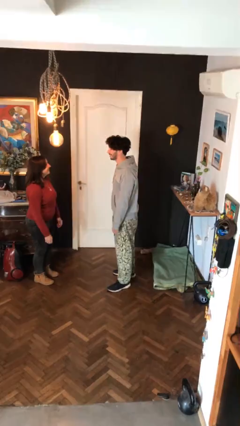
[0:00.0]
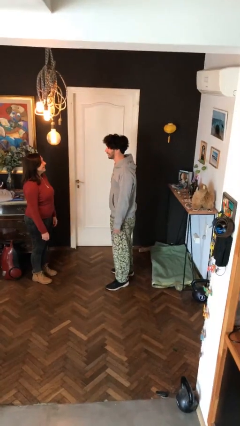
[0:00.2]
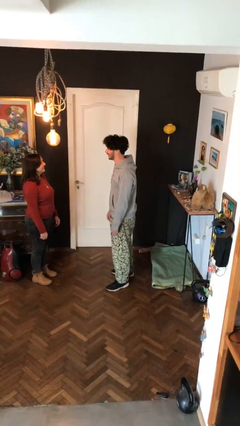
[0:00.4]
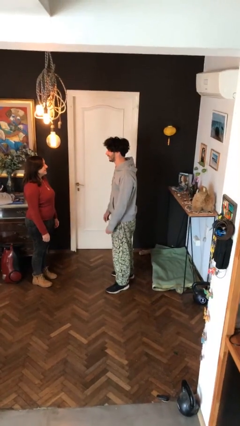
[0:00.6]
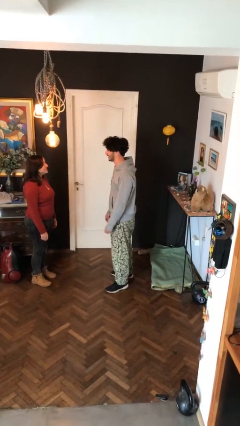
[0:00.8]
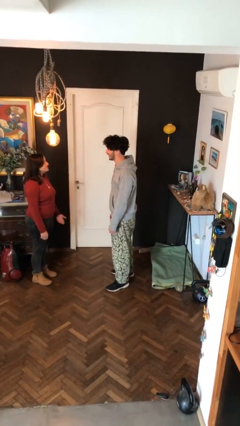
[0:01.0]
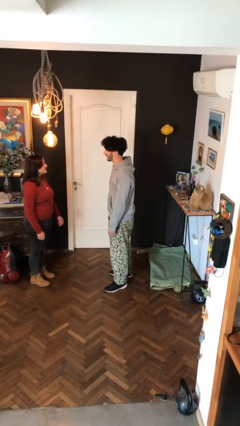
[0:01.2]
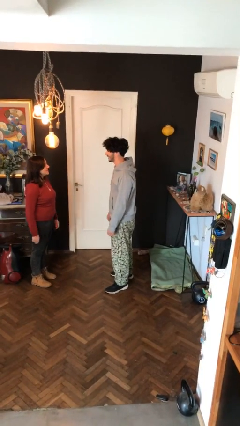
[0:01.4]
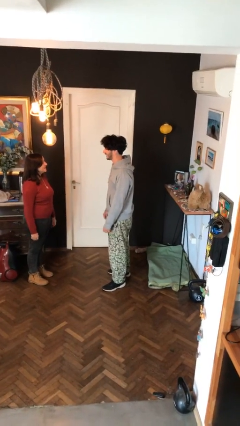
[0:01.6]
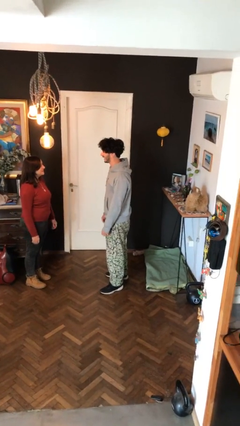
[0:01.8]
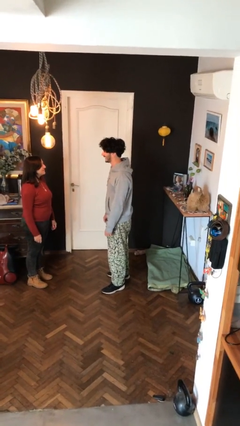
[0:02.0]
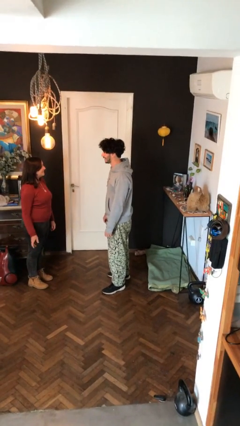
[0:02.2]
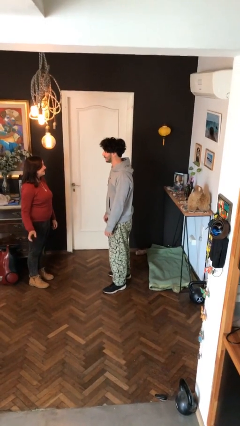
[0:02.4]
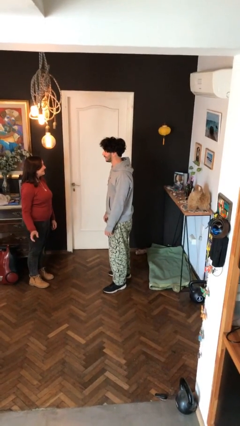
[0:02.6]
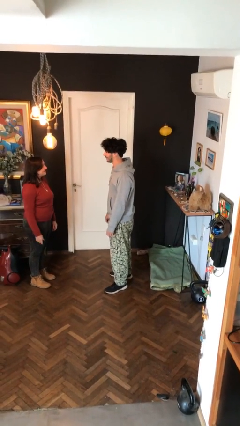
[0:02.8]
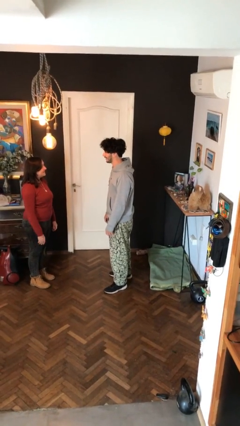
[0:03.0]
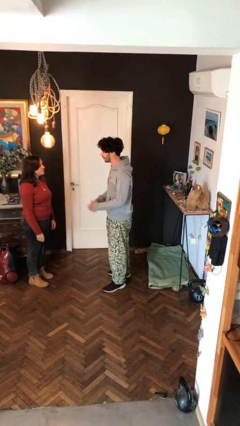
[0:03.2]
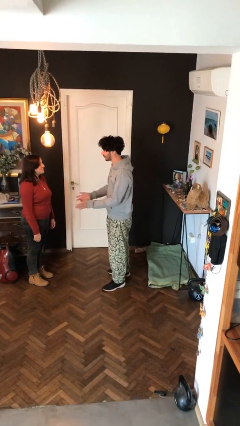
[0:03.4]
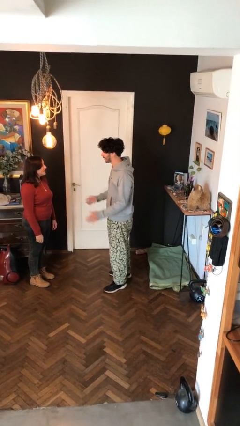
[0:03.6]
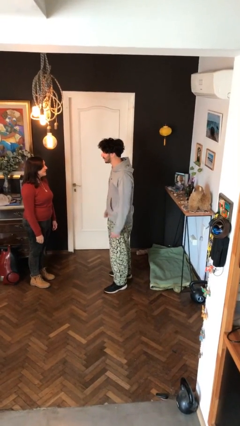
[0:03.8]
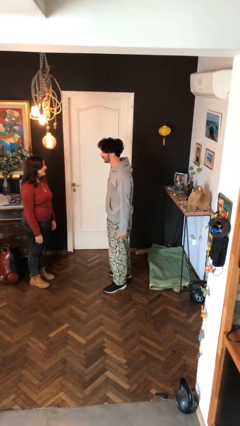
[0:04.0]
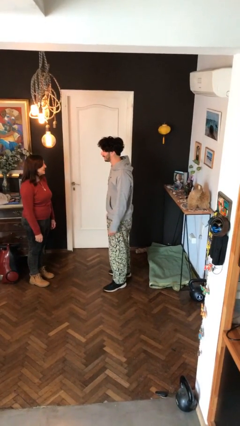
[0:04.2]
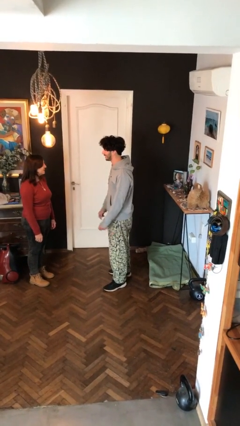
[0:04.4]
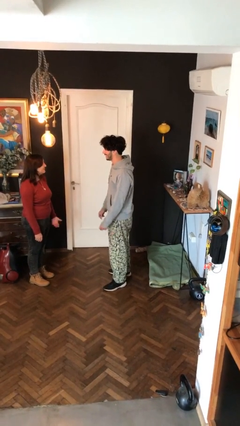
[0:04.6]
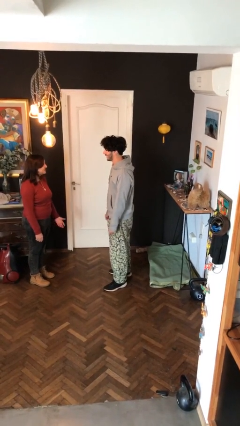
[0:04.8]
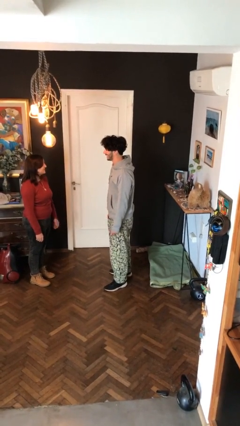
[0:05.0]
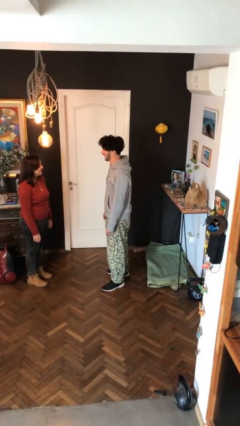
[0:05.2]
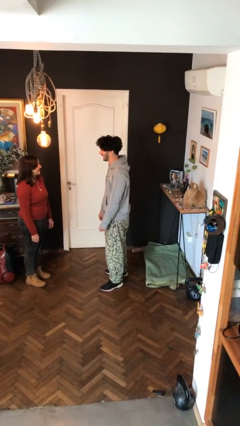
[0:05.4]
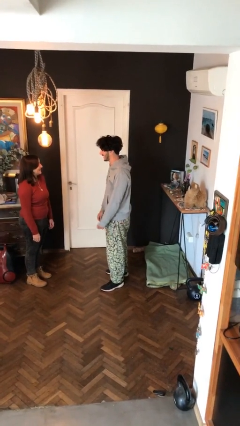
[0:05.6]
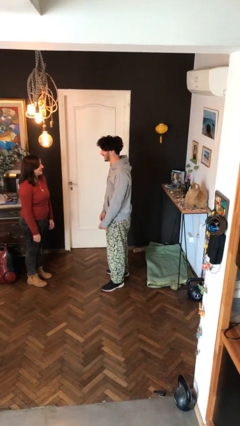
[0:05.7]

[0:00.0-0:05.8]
person talks to person

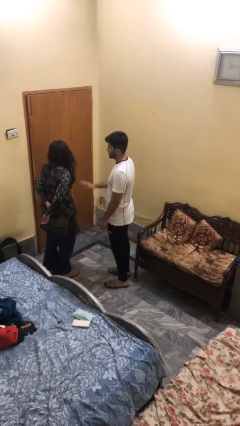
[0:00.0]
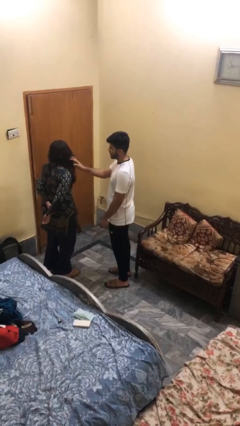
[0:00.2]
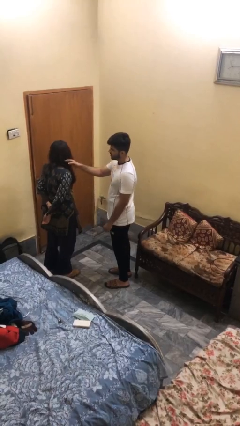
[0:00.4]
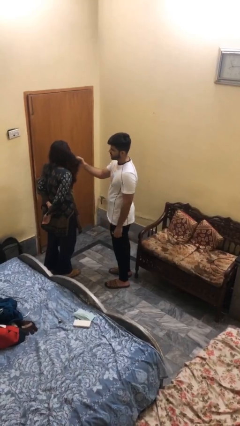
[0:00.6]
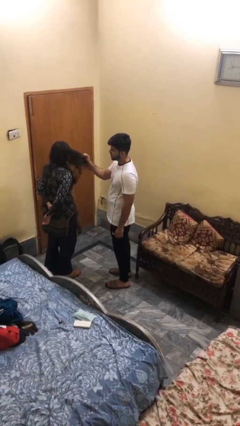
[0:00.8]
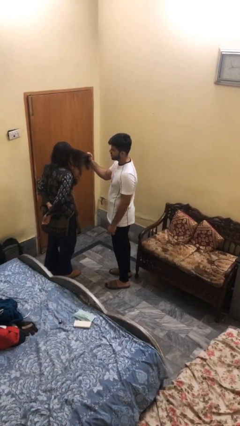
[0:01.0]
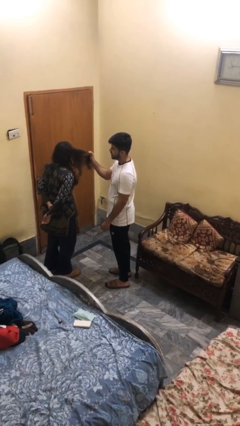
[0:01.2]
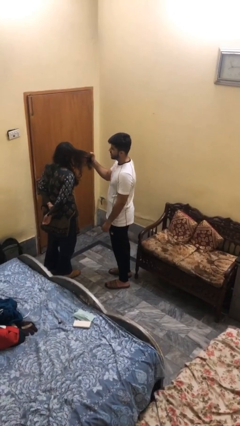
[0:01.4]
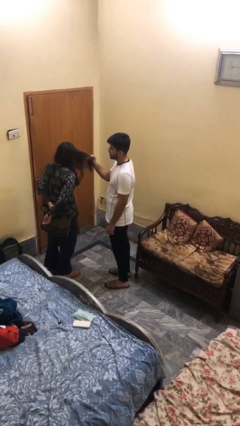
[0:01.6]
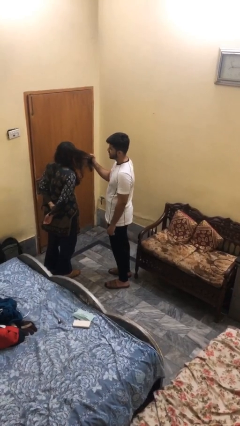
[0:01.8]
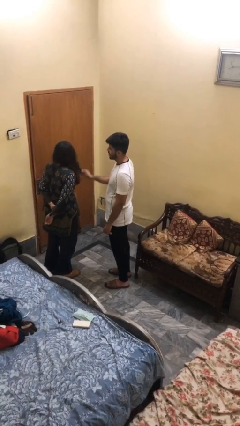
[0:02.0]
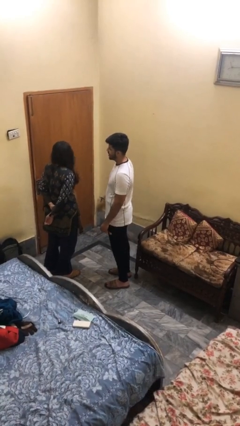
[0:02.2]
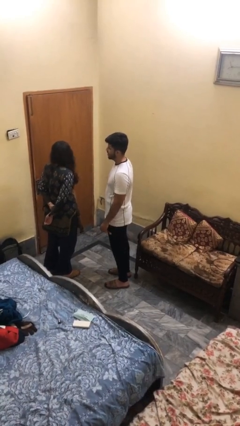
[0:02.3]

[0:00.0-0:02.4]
person grabs person by hair

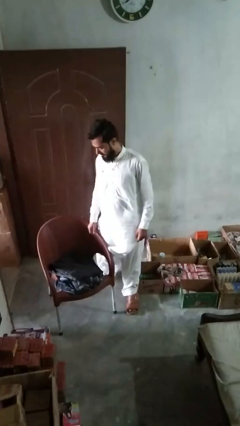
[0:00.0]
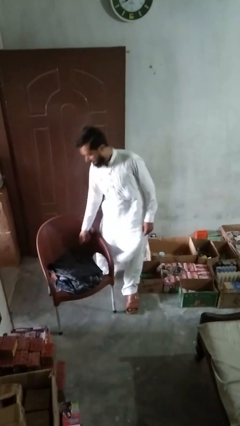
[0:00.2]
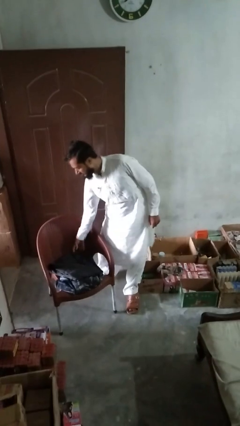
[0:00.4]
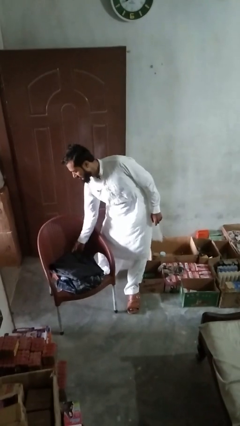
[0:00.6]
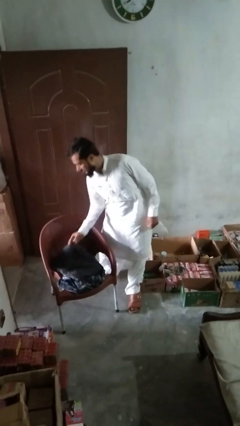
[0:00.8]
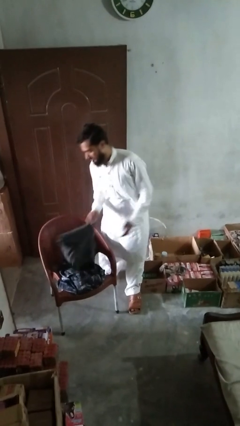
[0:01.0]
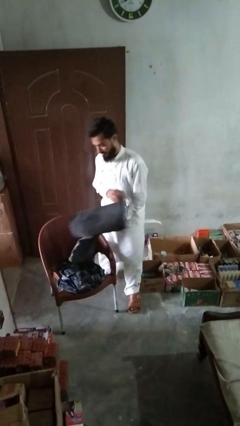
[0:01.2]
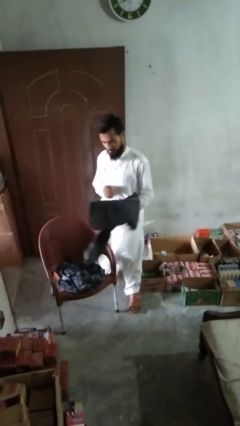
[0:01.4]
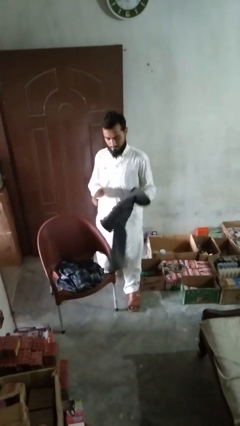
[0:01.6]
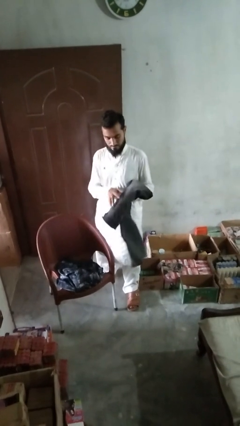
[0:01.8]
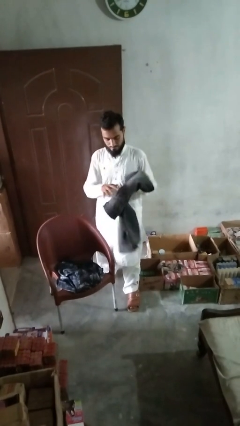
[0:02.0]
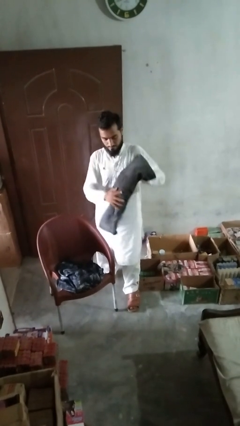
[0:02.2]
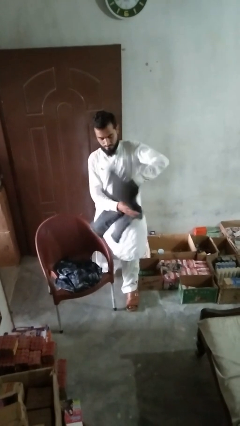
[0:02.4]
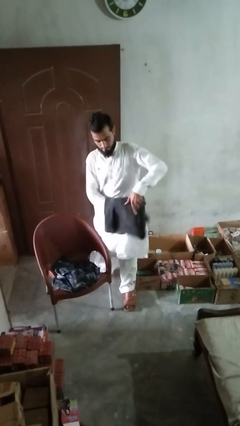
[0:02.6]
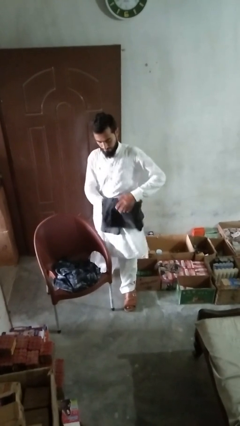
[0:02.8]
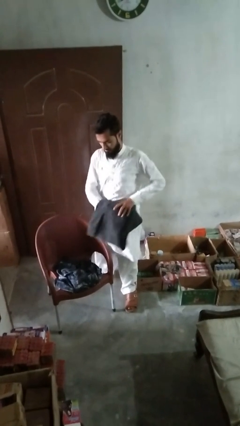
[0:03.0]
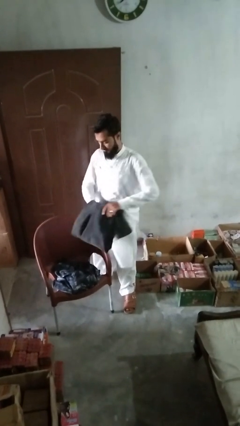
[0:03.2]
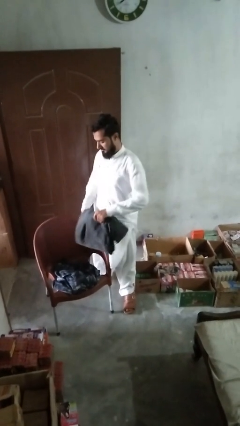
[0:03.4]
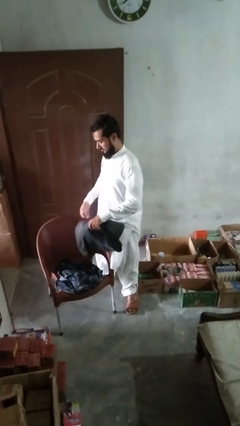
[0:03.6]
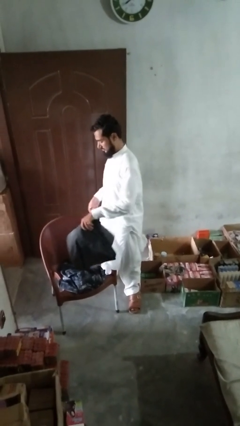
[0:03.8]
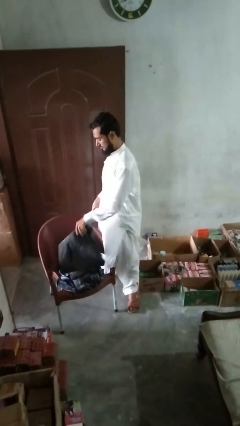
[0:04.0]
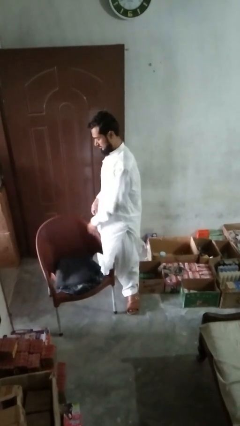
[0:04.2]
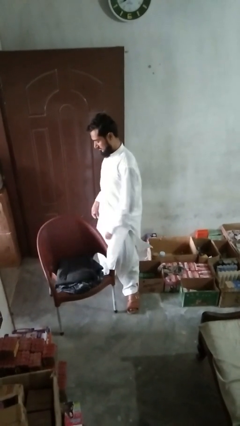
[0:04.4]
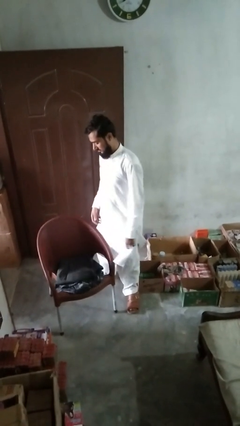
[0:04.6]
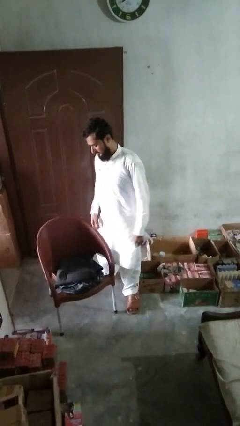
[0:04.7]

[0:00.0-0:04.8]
person folds pants

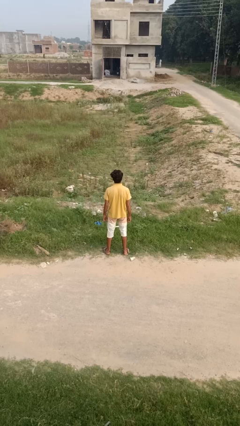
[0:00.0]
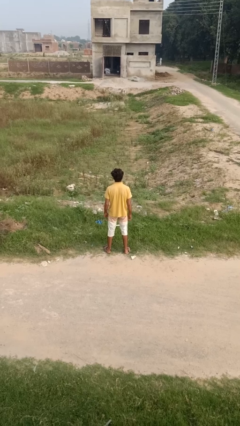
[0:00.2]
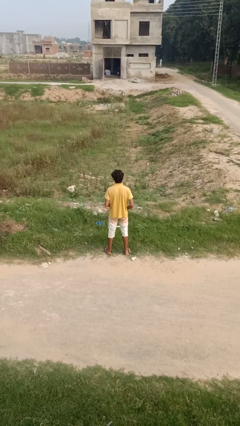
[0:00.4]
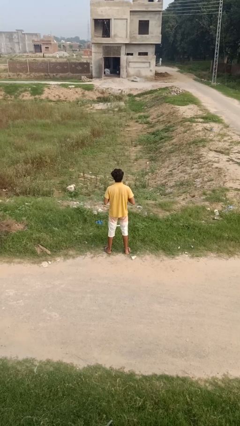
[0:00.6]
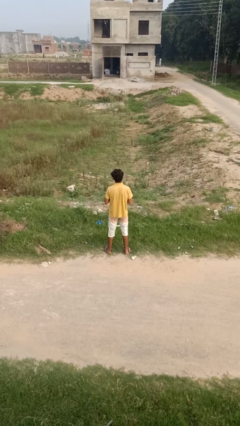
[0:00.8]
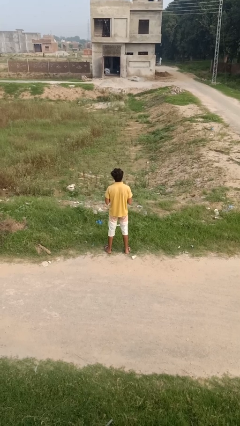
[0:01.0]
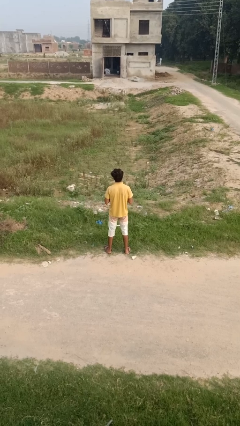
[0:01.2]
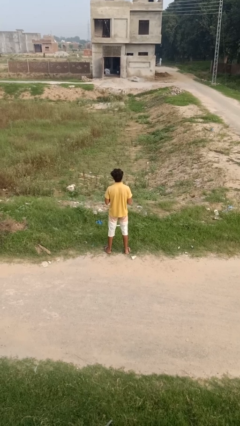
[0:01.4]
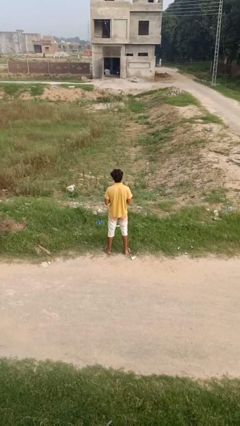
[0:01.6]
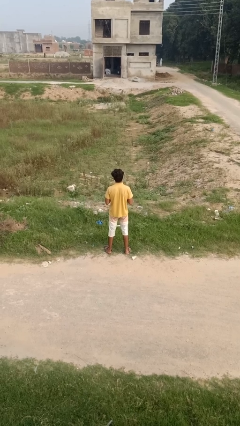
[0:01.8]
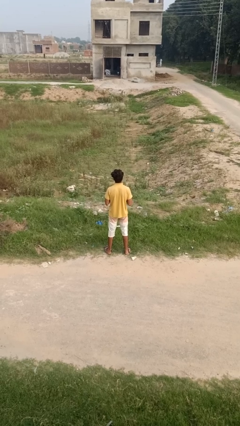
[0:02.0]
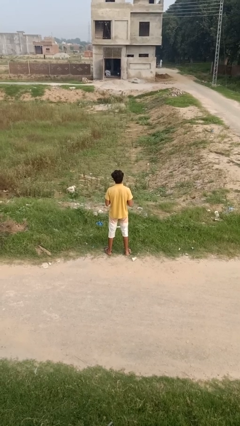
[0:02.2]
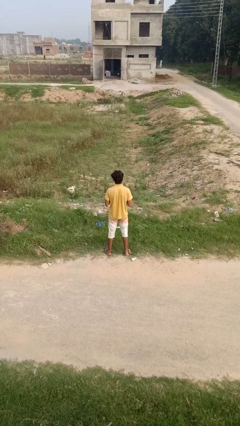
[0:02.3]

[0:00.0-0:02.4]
person unbuttons shirt

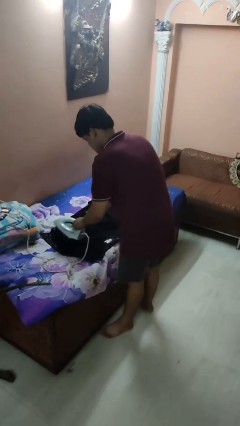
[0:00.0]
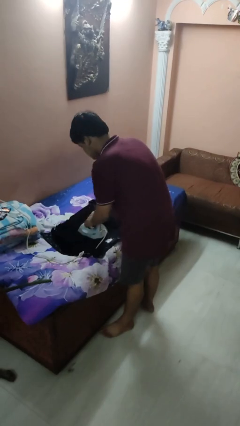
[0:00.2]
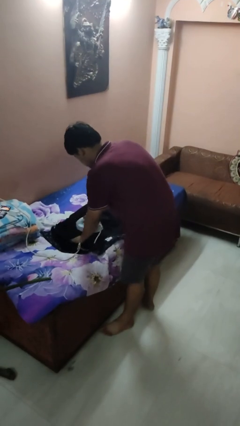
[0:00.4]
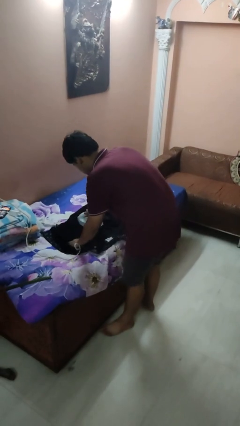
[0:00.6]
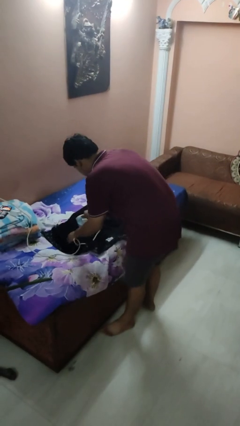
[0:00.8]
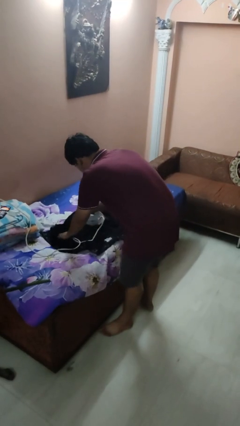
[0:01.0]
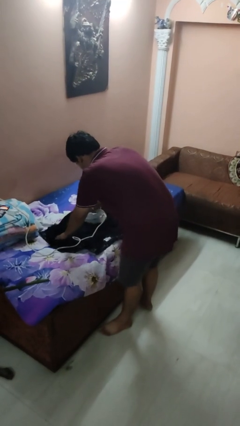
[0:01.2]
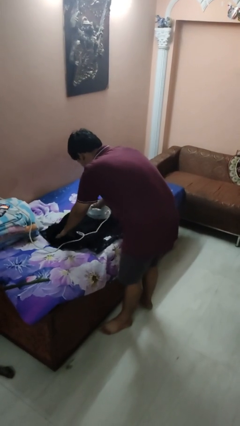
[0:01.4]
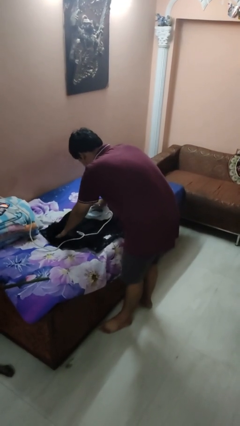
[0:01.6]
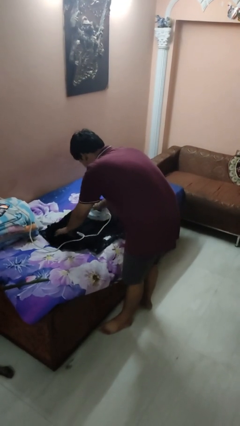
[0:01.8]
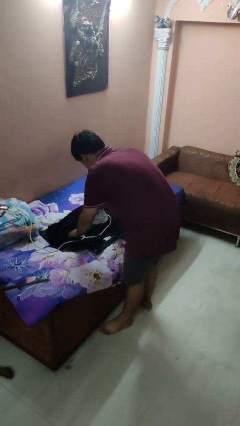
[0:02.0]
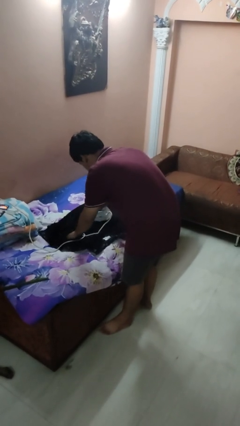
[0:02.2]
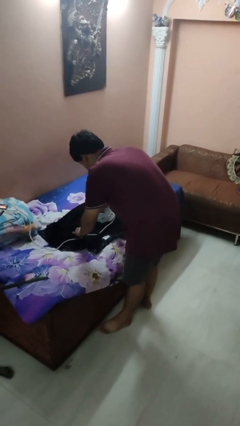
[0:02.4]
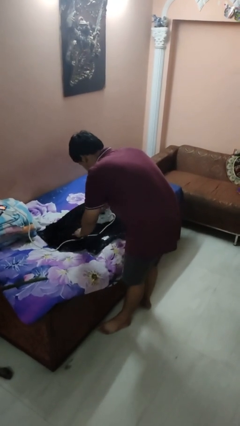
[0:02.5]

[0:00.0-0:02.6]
person irons clothes
